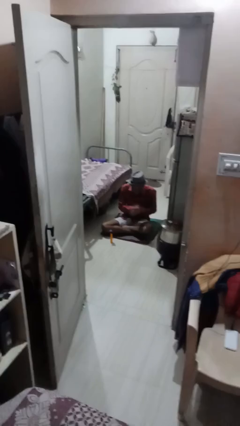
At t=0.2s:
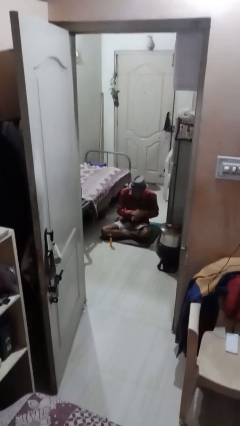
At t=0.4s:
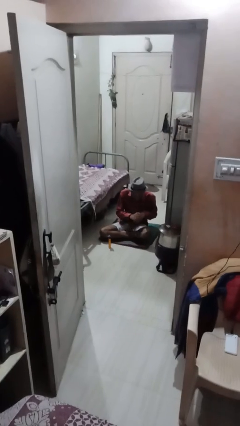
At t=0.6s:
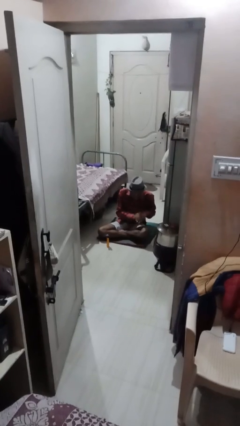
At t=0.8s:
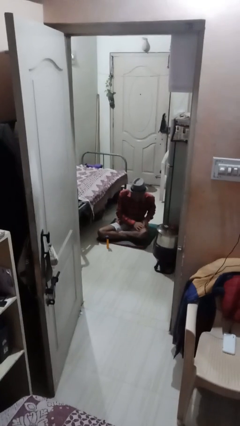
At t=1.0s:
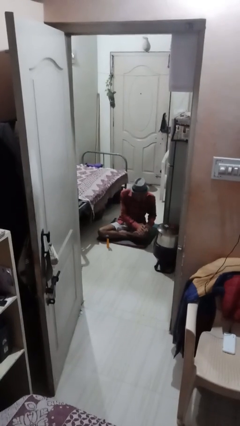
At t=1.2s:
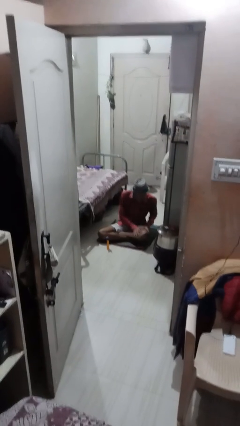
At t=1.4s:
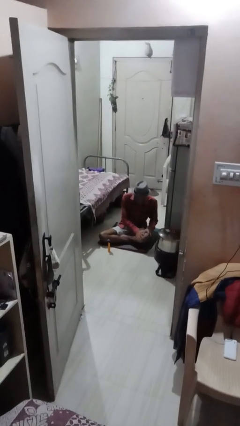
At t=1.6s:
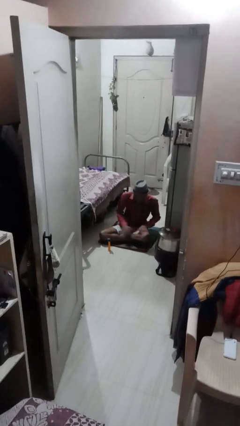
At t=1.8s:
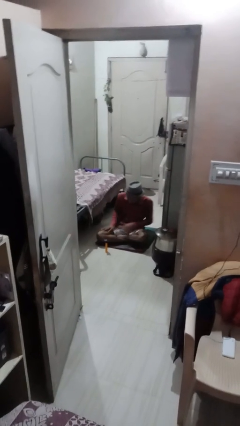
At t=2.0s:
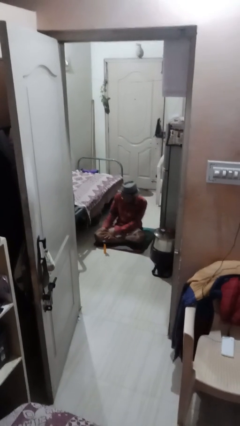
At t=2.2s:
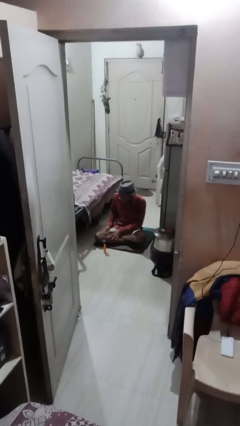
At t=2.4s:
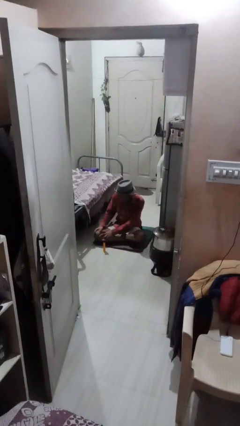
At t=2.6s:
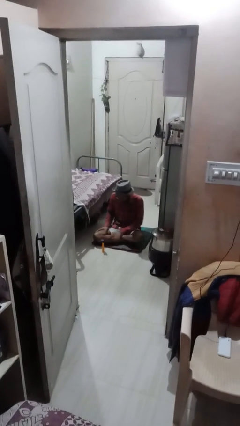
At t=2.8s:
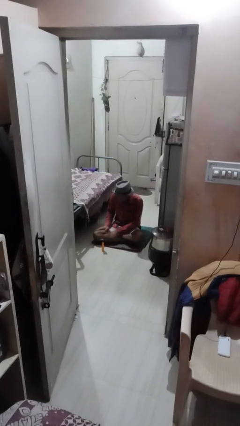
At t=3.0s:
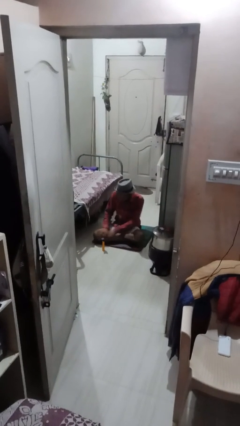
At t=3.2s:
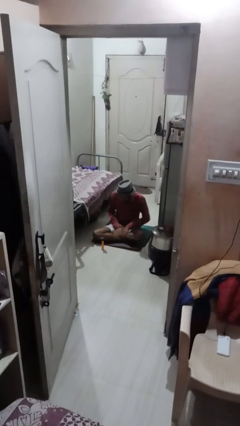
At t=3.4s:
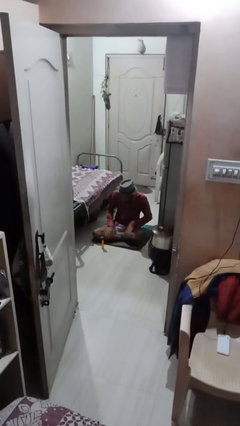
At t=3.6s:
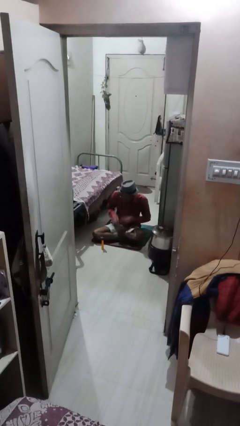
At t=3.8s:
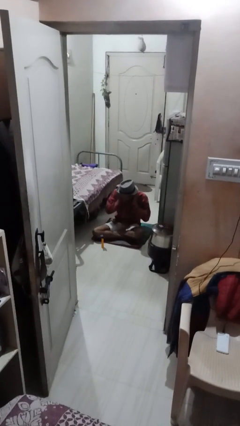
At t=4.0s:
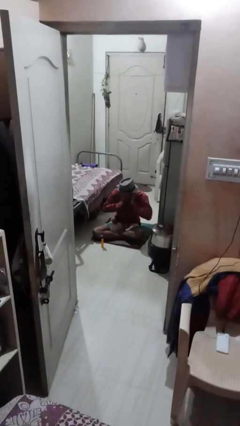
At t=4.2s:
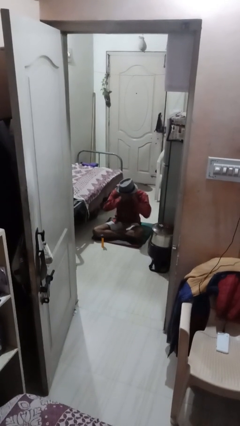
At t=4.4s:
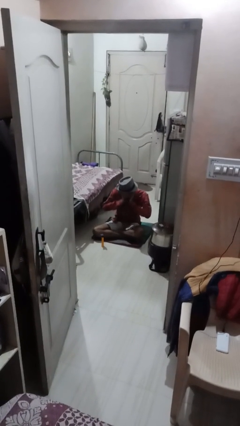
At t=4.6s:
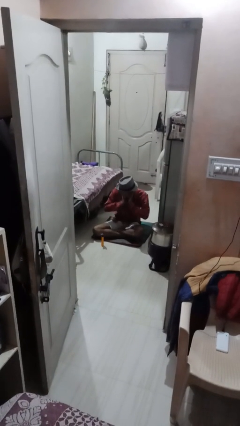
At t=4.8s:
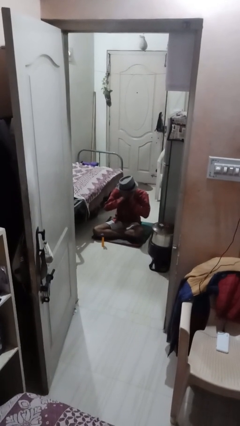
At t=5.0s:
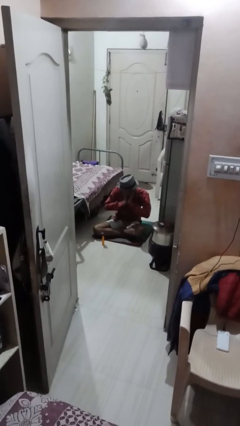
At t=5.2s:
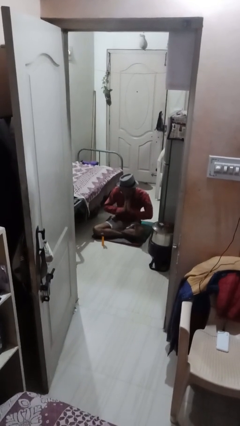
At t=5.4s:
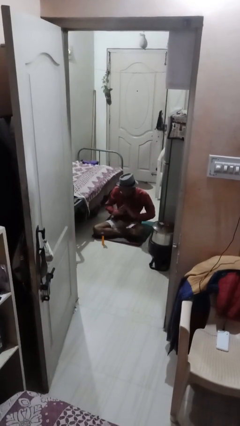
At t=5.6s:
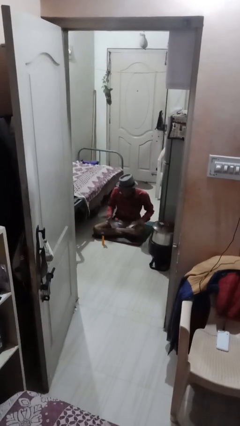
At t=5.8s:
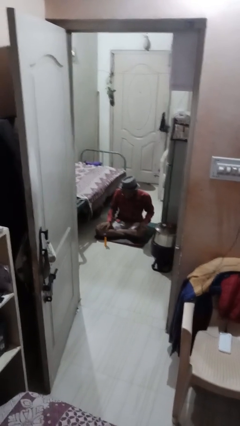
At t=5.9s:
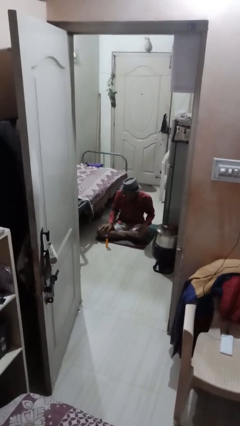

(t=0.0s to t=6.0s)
person applies sunscreen

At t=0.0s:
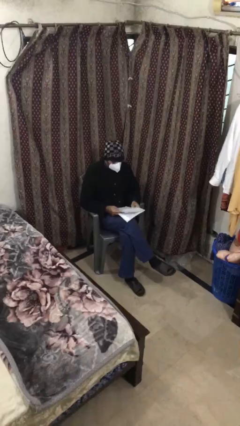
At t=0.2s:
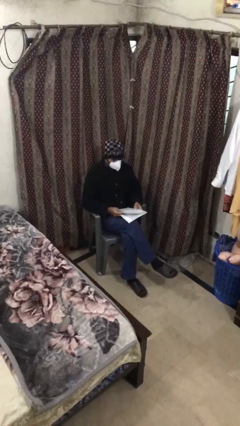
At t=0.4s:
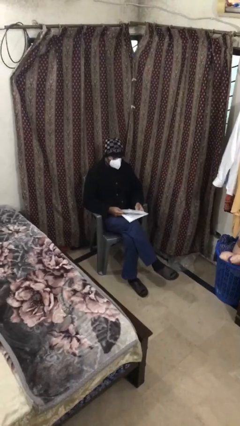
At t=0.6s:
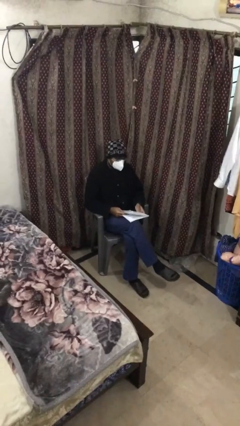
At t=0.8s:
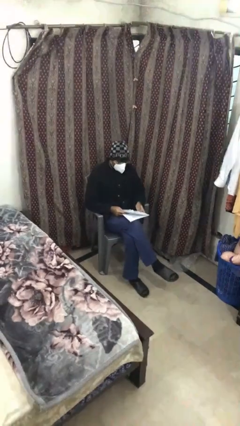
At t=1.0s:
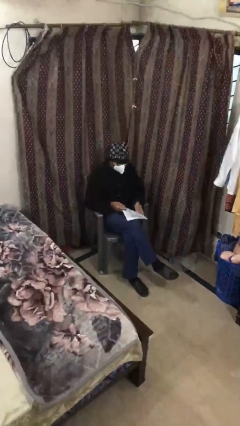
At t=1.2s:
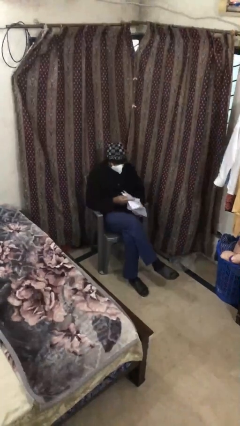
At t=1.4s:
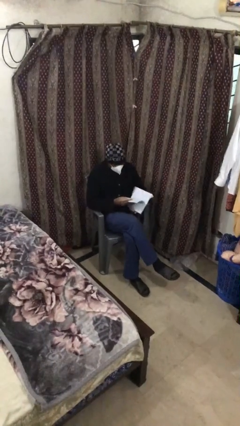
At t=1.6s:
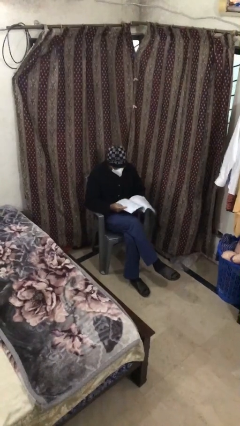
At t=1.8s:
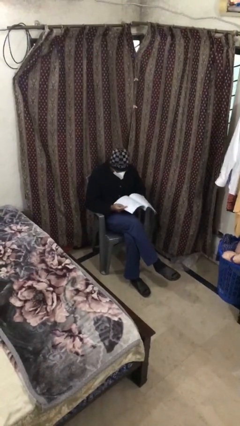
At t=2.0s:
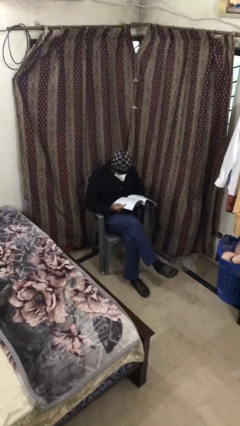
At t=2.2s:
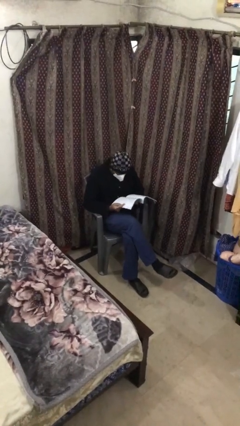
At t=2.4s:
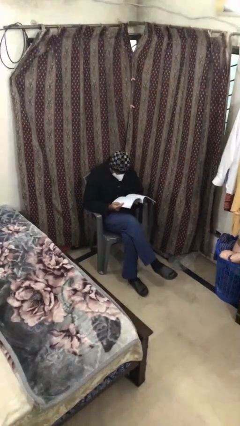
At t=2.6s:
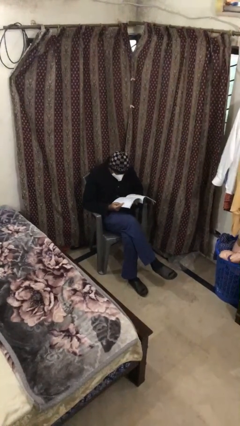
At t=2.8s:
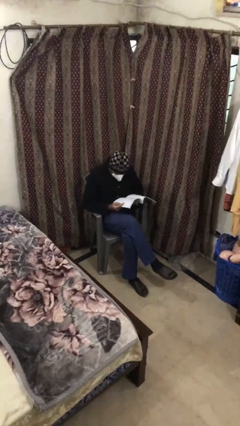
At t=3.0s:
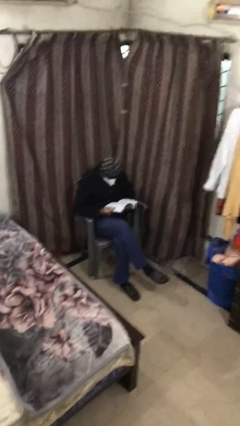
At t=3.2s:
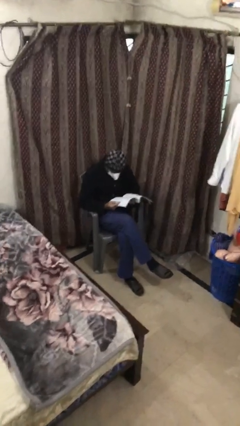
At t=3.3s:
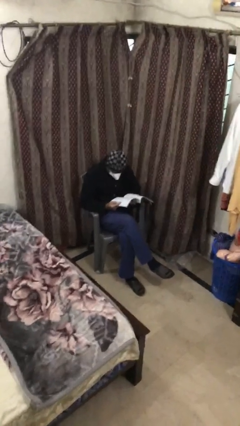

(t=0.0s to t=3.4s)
person reads document

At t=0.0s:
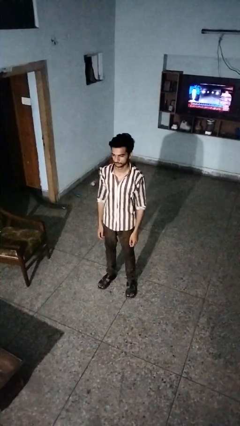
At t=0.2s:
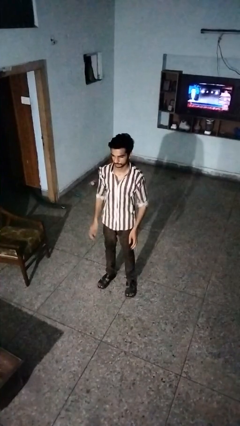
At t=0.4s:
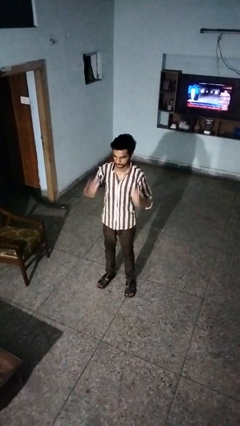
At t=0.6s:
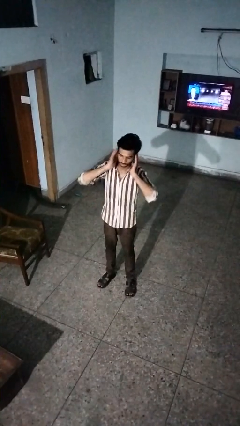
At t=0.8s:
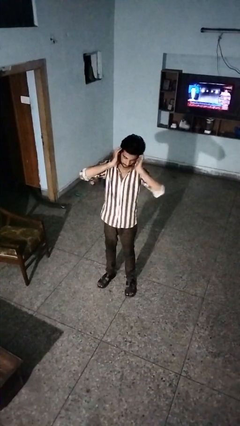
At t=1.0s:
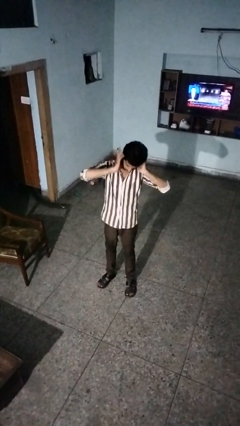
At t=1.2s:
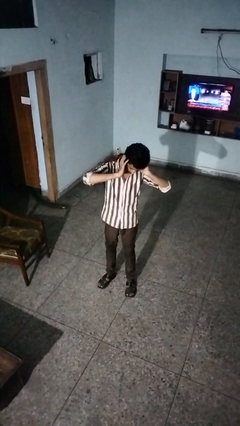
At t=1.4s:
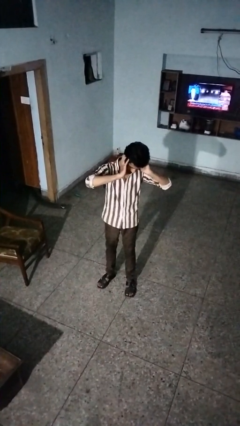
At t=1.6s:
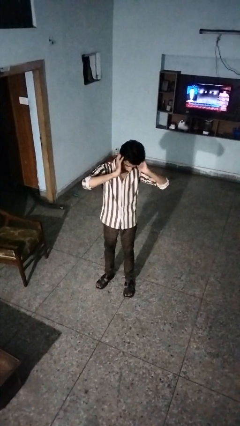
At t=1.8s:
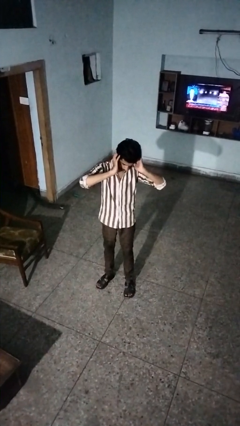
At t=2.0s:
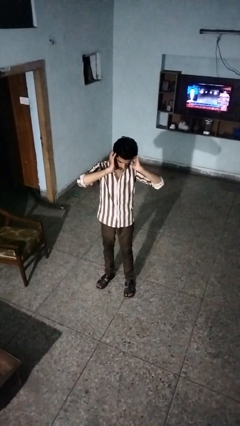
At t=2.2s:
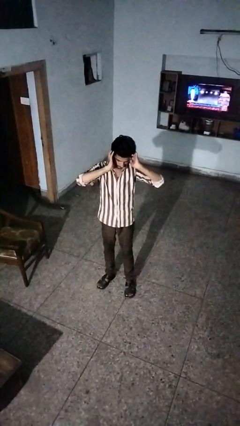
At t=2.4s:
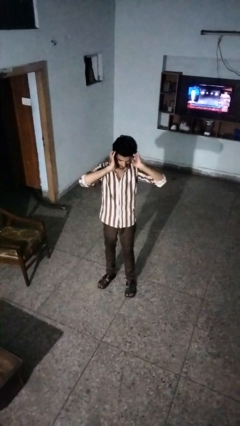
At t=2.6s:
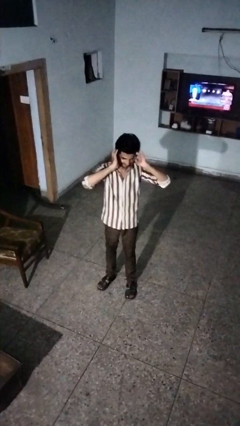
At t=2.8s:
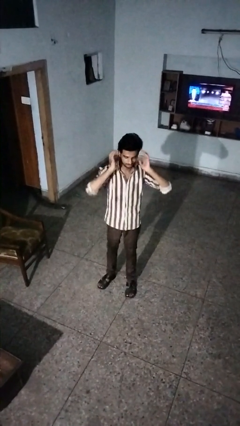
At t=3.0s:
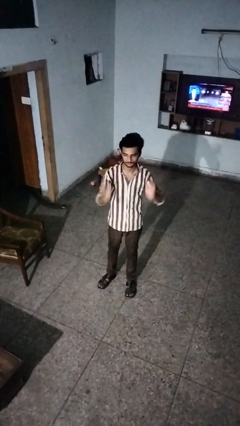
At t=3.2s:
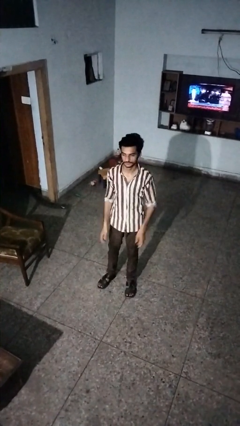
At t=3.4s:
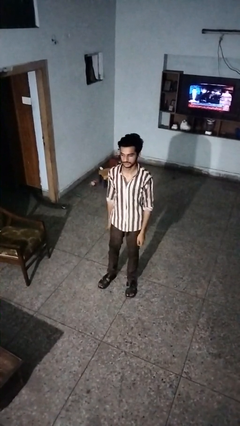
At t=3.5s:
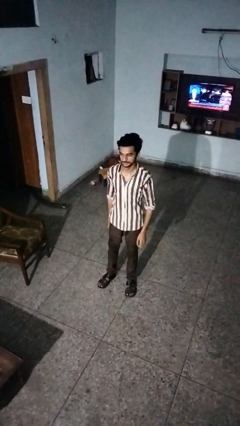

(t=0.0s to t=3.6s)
person puts fingers in ear

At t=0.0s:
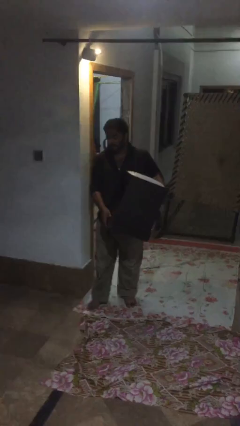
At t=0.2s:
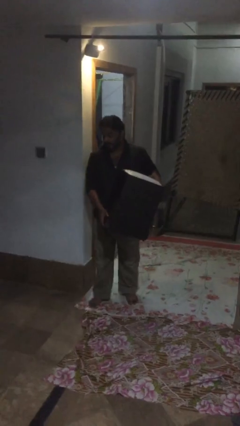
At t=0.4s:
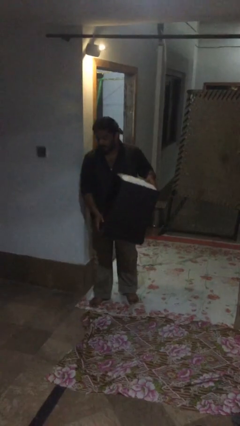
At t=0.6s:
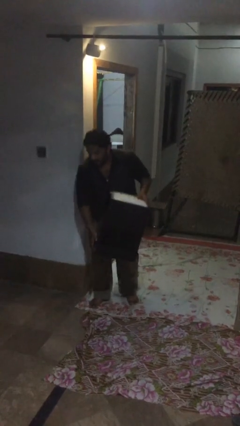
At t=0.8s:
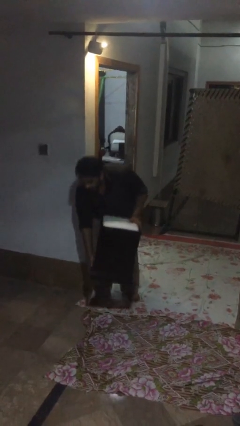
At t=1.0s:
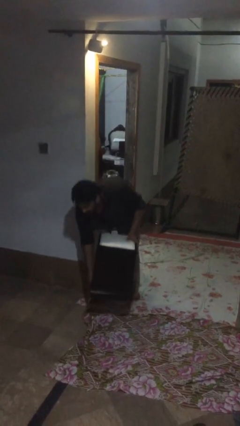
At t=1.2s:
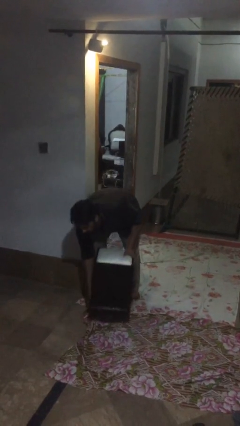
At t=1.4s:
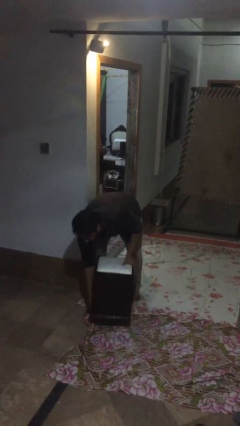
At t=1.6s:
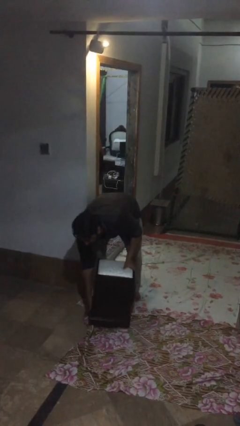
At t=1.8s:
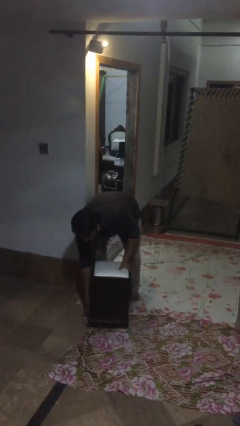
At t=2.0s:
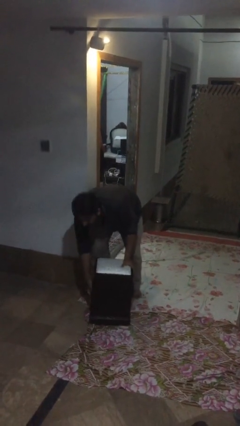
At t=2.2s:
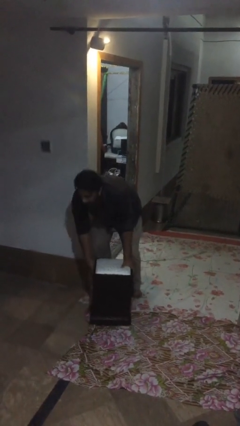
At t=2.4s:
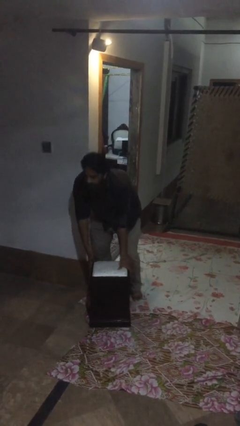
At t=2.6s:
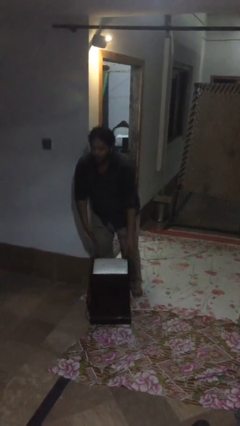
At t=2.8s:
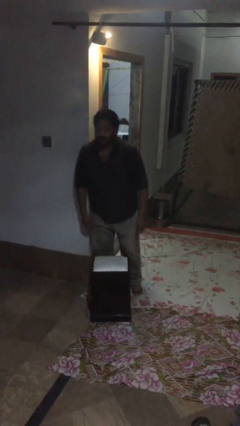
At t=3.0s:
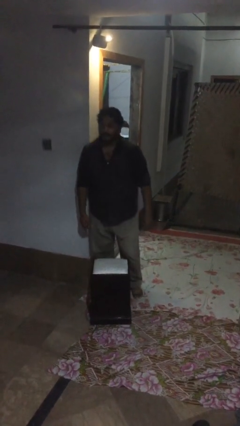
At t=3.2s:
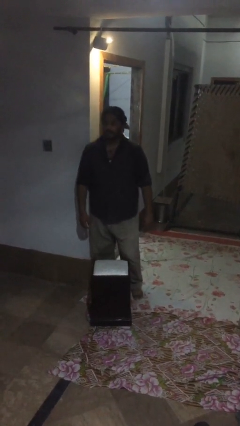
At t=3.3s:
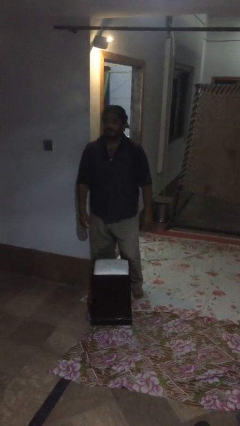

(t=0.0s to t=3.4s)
person puts down object on floor

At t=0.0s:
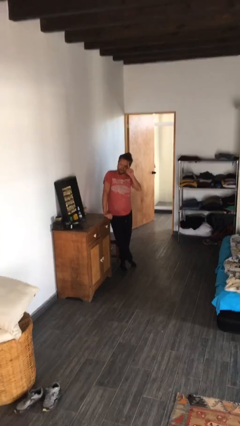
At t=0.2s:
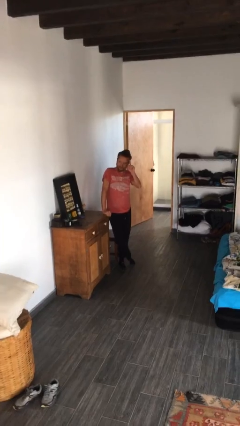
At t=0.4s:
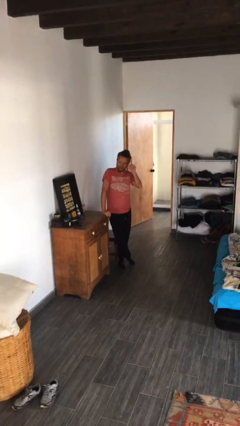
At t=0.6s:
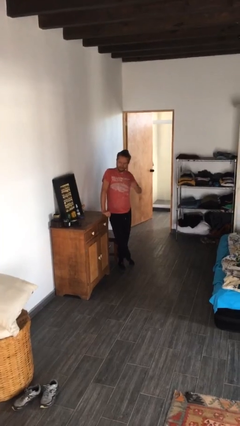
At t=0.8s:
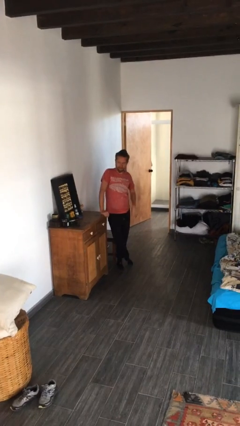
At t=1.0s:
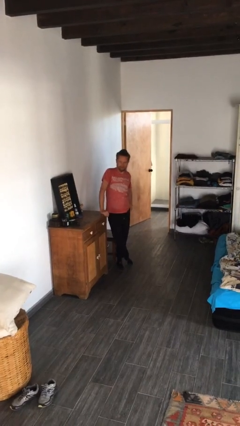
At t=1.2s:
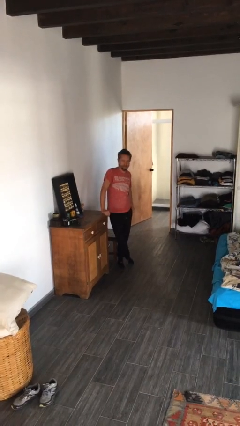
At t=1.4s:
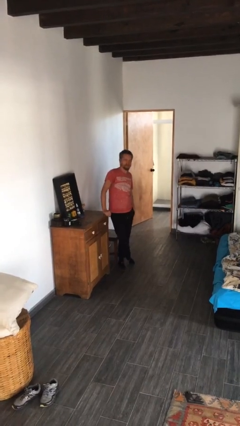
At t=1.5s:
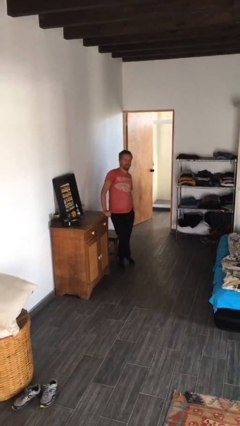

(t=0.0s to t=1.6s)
person gestures lower hand
